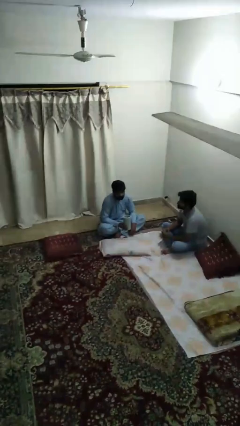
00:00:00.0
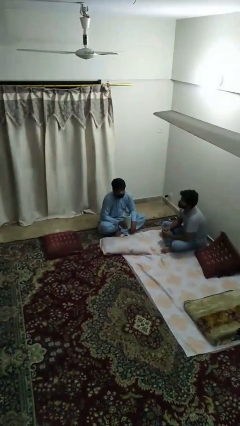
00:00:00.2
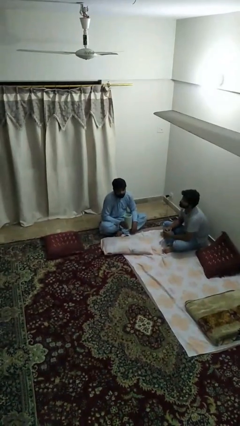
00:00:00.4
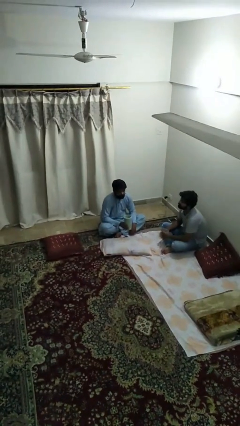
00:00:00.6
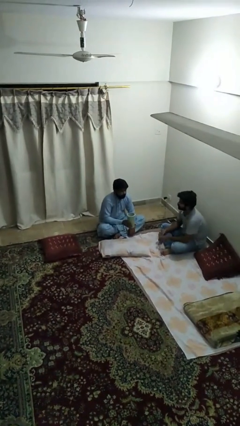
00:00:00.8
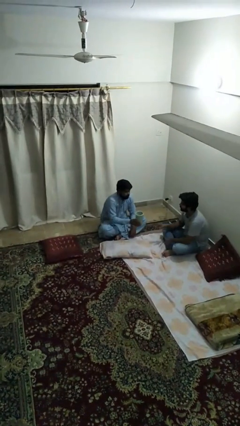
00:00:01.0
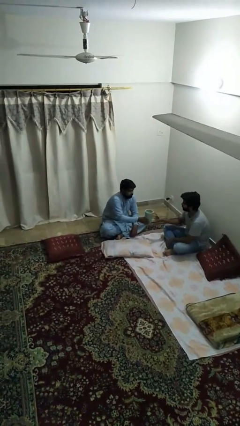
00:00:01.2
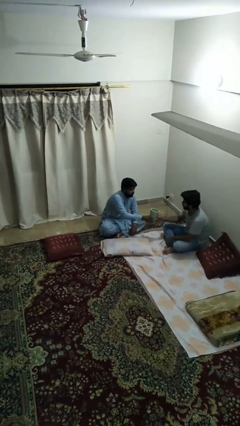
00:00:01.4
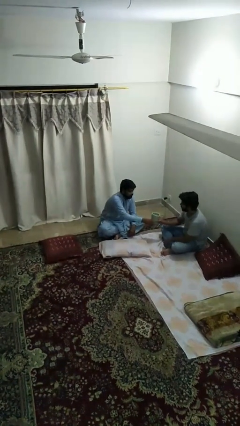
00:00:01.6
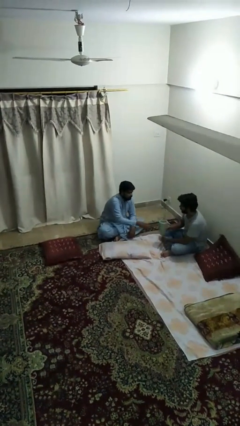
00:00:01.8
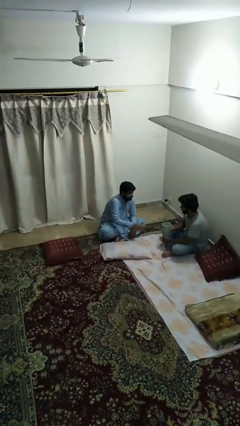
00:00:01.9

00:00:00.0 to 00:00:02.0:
person transfers object to person

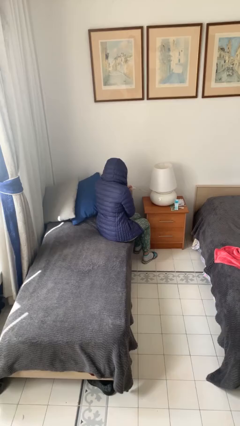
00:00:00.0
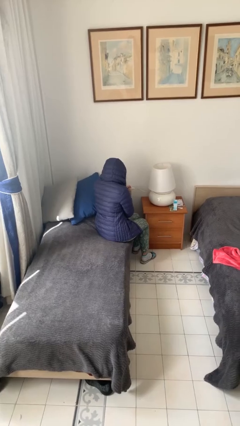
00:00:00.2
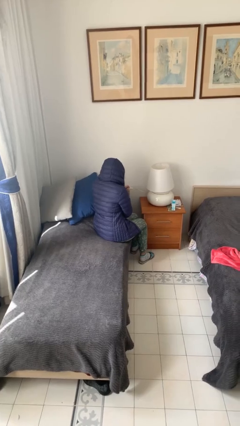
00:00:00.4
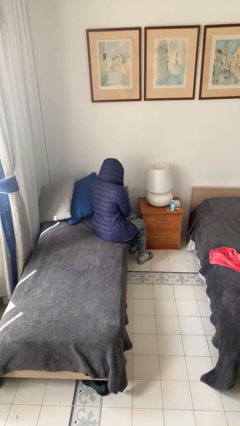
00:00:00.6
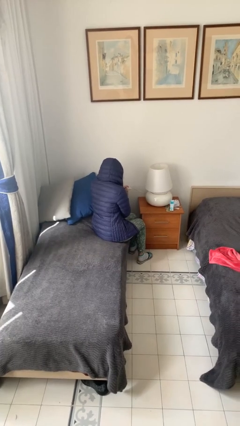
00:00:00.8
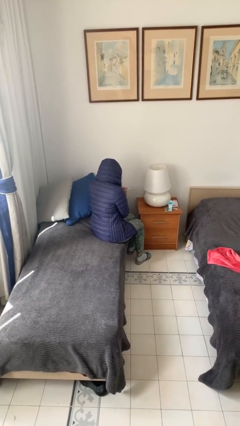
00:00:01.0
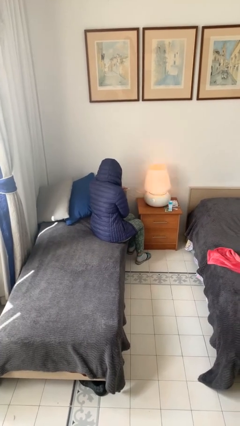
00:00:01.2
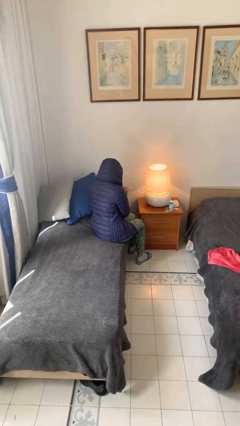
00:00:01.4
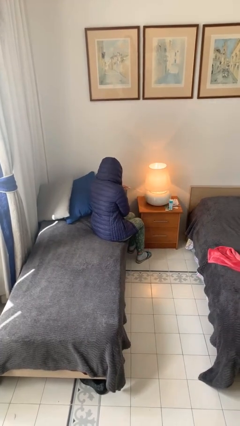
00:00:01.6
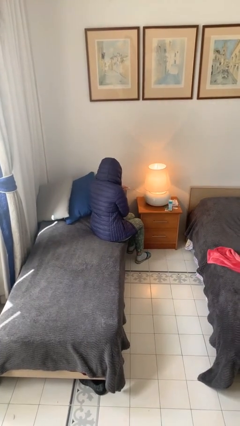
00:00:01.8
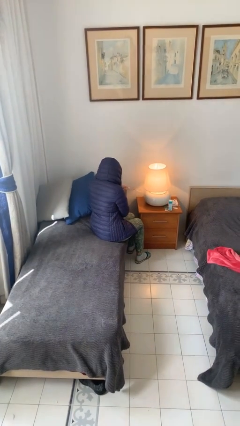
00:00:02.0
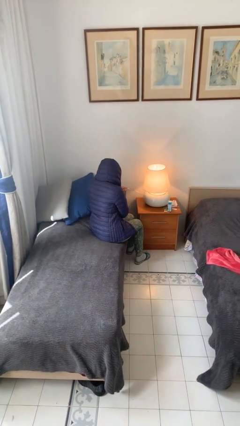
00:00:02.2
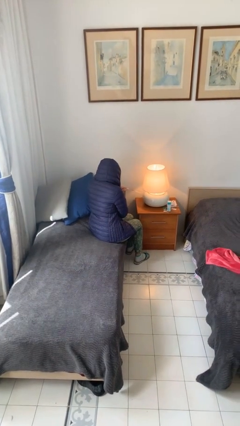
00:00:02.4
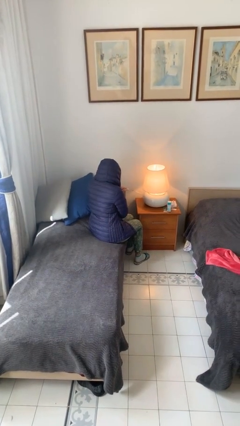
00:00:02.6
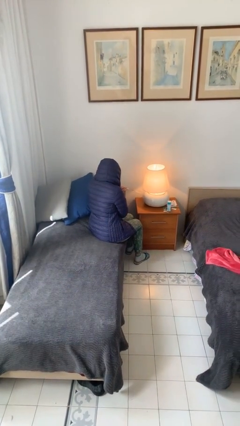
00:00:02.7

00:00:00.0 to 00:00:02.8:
person turns on lamp

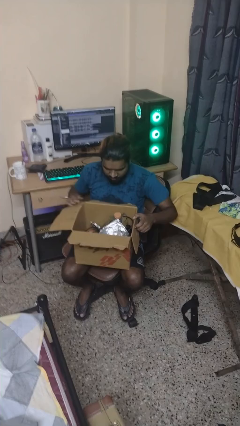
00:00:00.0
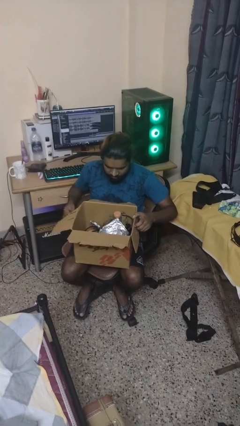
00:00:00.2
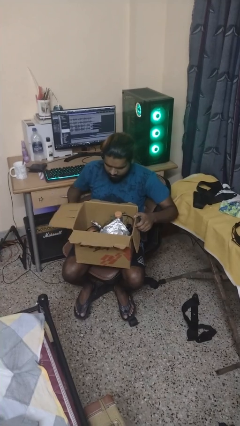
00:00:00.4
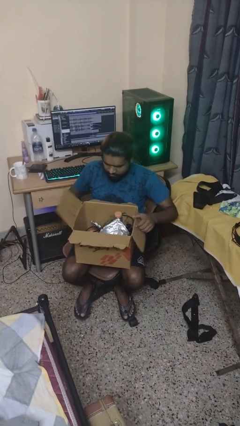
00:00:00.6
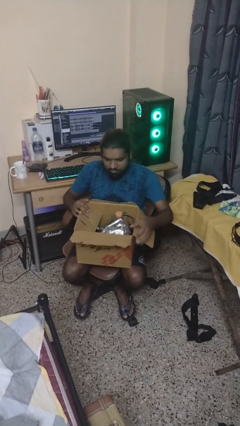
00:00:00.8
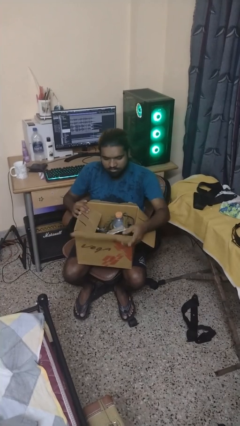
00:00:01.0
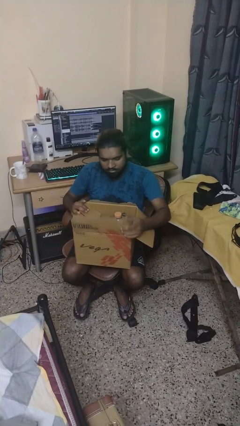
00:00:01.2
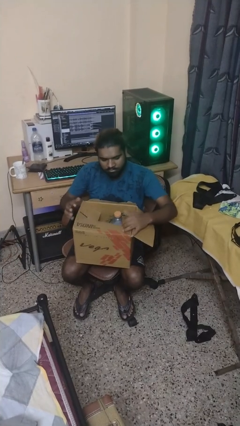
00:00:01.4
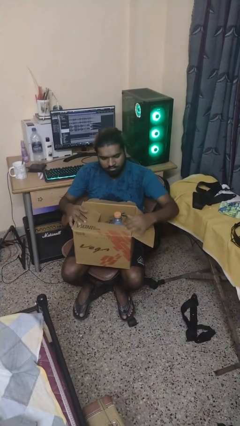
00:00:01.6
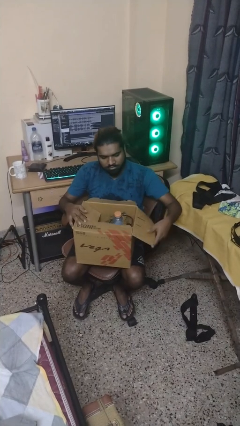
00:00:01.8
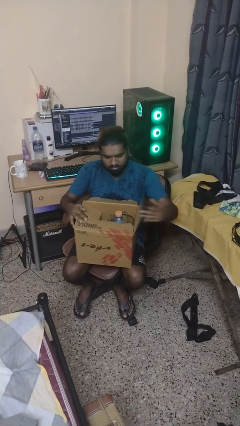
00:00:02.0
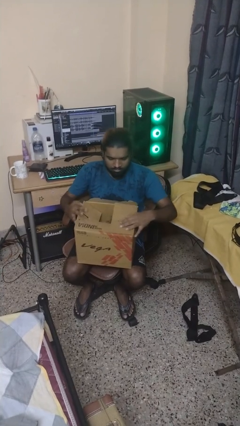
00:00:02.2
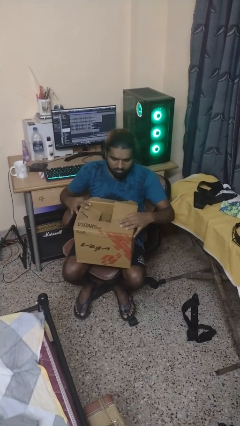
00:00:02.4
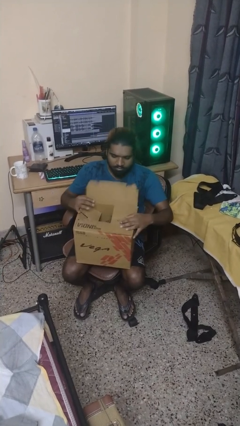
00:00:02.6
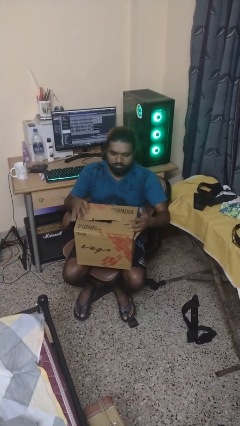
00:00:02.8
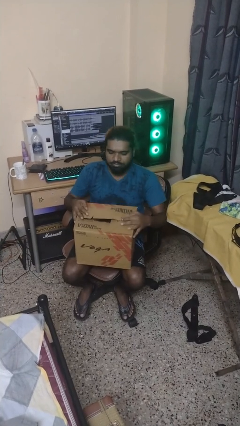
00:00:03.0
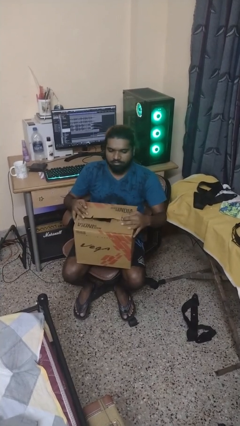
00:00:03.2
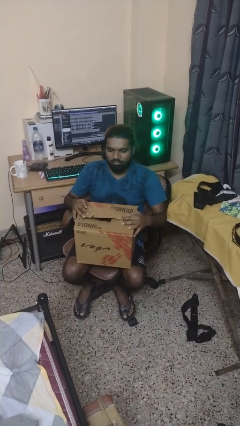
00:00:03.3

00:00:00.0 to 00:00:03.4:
person closes box

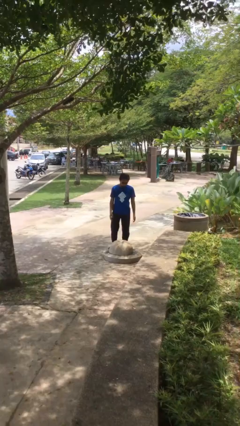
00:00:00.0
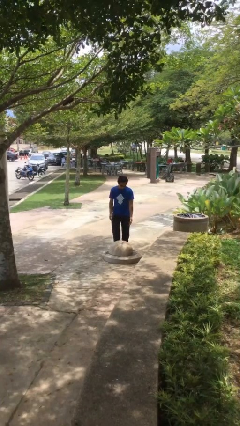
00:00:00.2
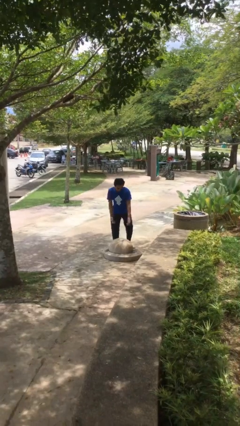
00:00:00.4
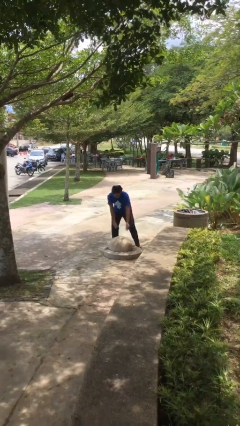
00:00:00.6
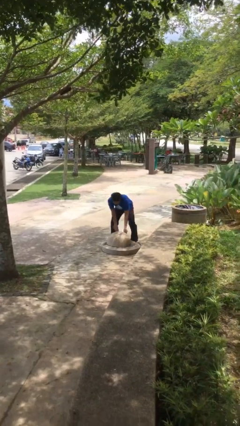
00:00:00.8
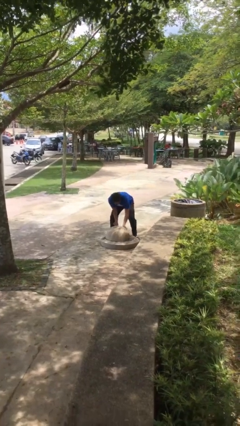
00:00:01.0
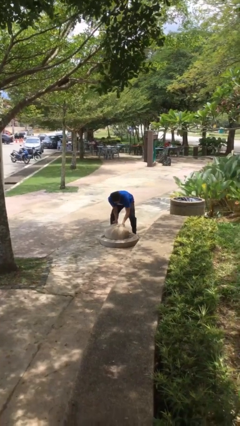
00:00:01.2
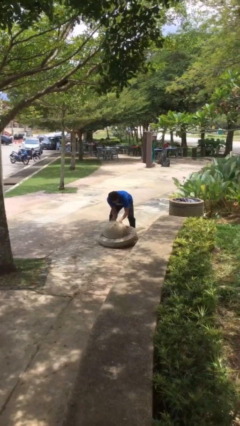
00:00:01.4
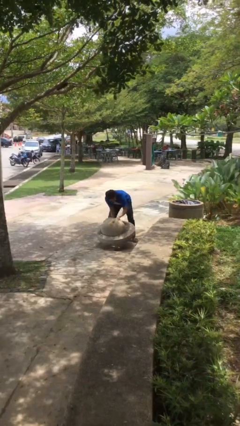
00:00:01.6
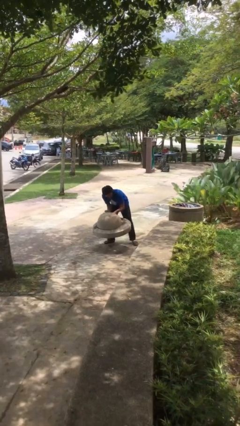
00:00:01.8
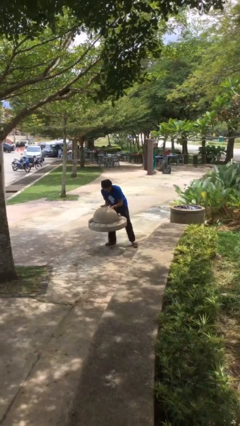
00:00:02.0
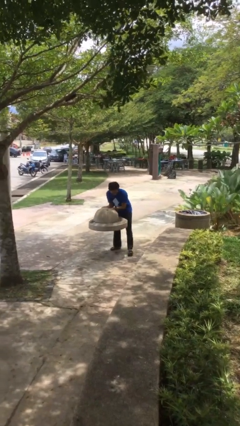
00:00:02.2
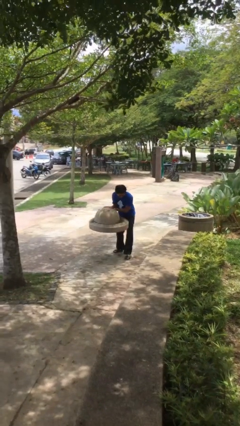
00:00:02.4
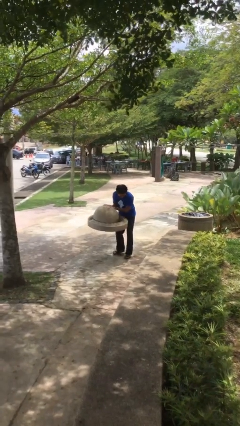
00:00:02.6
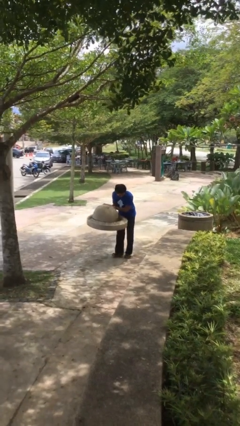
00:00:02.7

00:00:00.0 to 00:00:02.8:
person picks up object from floor

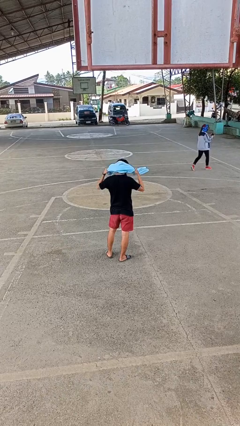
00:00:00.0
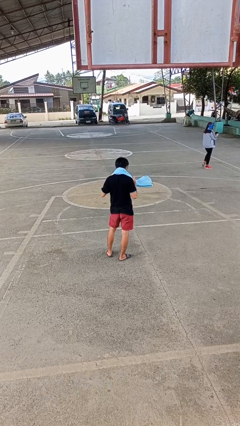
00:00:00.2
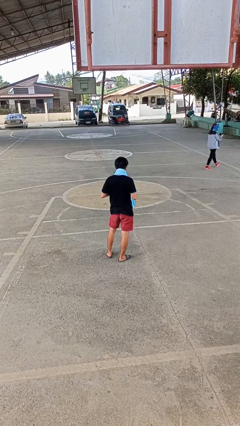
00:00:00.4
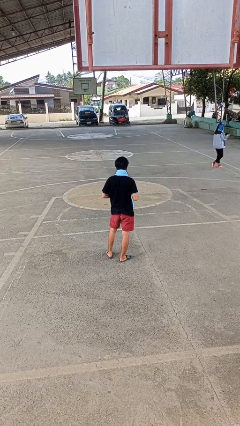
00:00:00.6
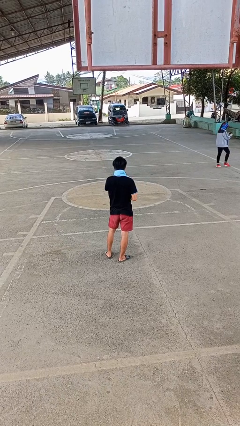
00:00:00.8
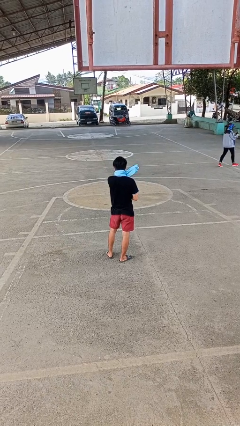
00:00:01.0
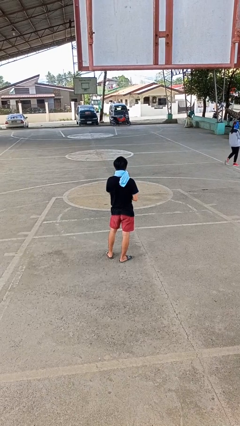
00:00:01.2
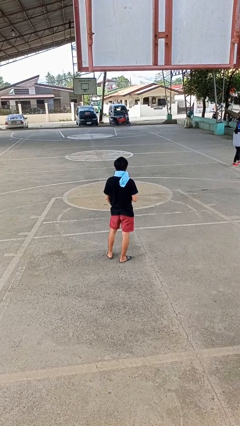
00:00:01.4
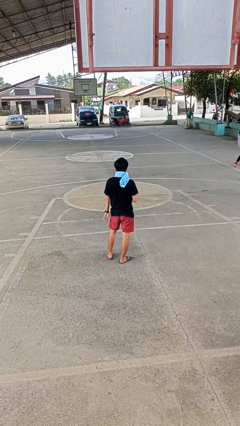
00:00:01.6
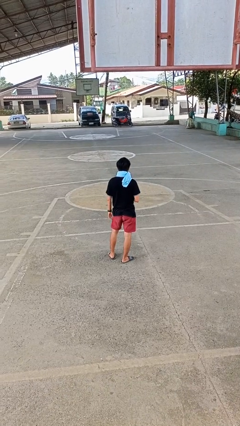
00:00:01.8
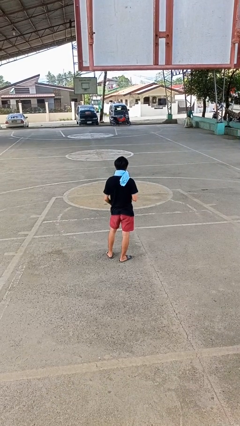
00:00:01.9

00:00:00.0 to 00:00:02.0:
person puts on scarf

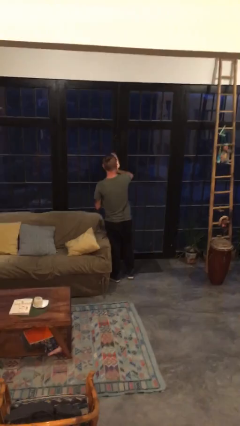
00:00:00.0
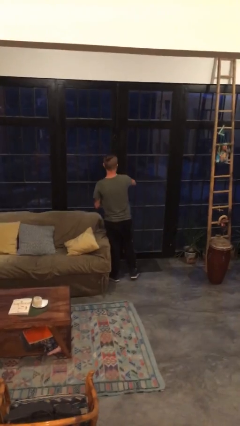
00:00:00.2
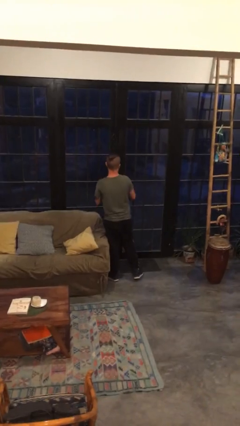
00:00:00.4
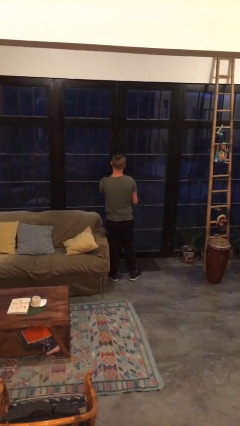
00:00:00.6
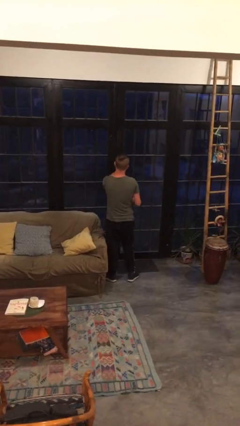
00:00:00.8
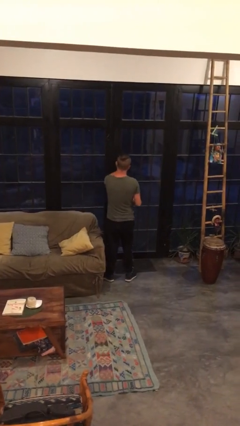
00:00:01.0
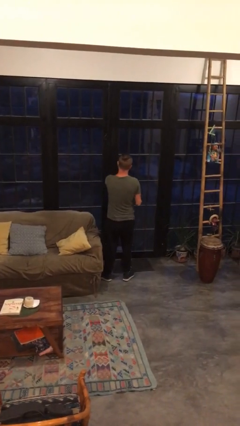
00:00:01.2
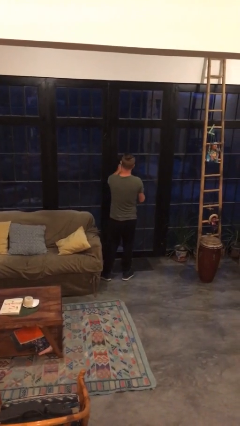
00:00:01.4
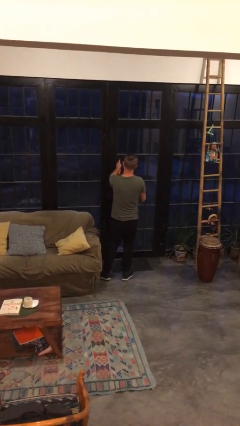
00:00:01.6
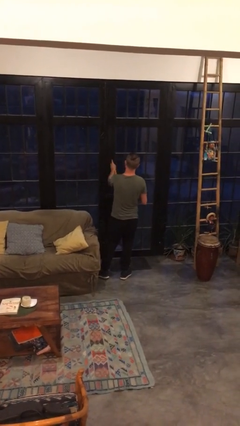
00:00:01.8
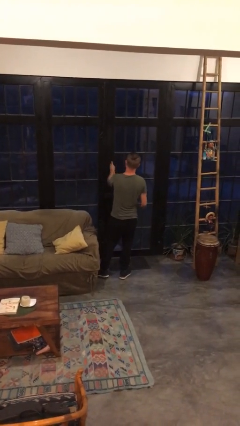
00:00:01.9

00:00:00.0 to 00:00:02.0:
person sprays from bottle

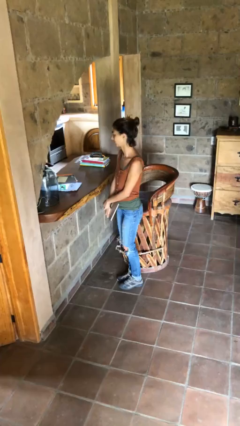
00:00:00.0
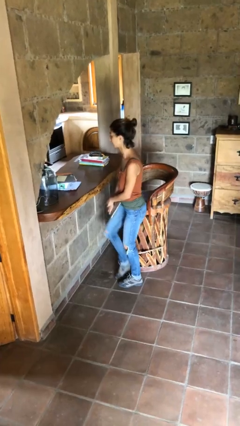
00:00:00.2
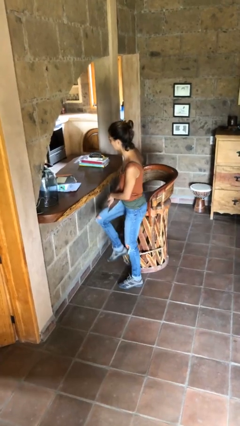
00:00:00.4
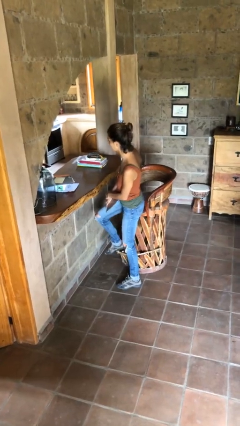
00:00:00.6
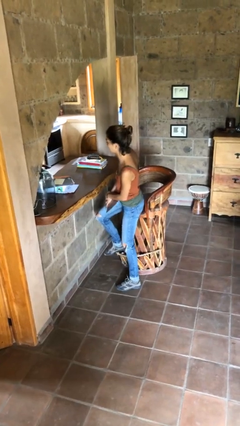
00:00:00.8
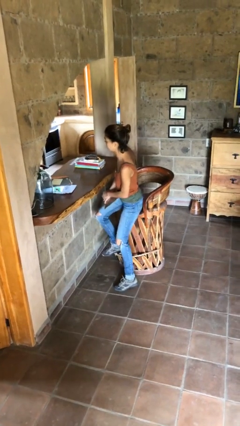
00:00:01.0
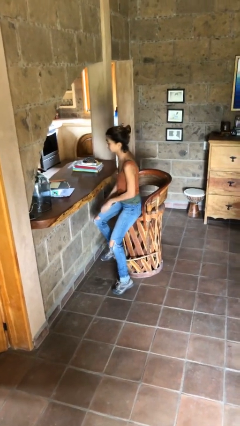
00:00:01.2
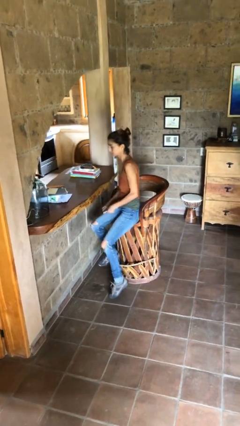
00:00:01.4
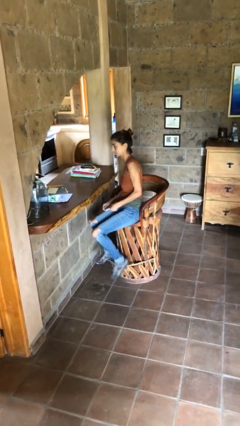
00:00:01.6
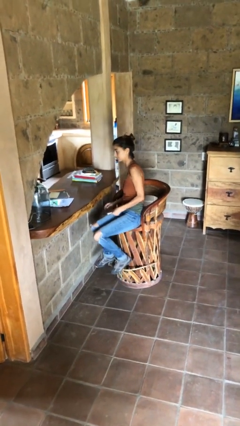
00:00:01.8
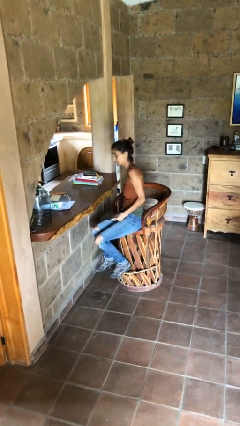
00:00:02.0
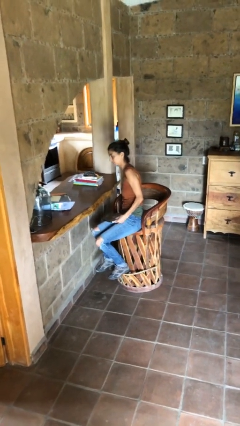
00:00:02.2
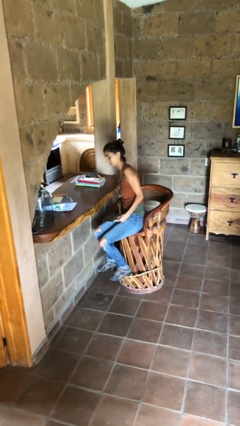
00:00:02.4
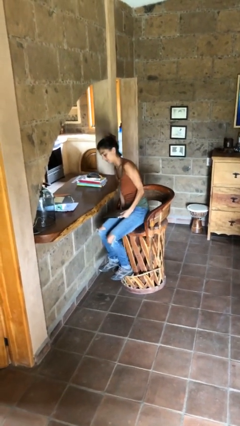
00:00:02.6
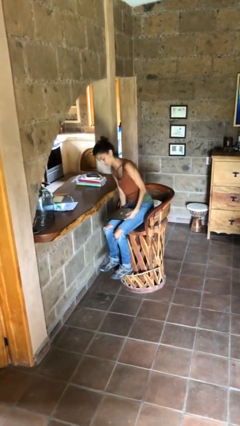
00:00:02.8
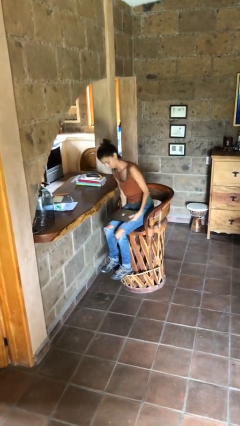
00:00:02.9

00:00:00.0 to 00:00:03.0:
person sits down
